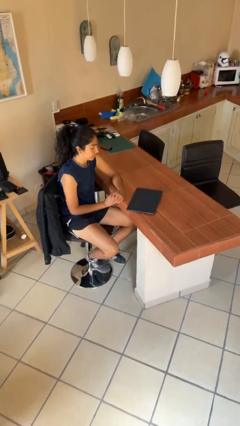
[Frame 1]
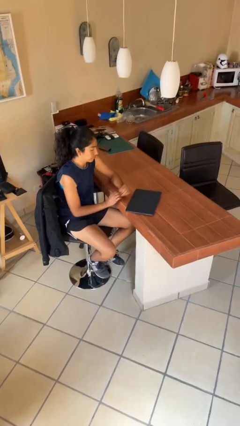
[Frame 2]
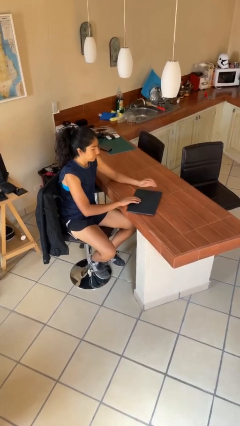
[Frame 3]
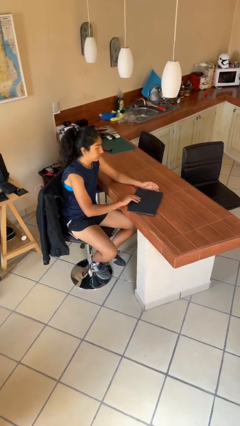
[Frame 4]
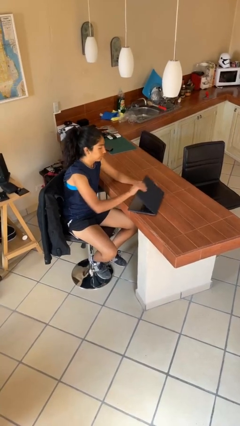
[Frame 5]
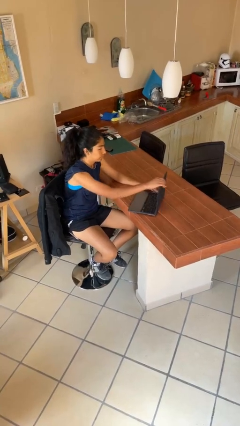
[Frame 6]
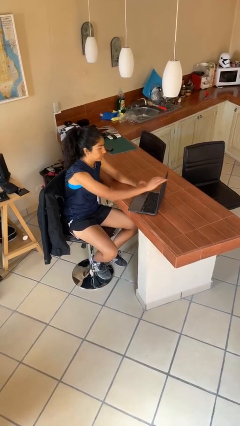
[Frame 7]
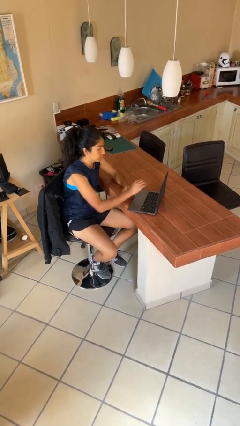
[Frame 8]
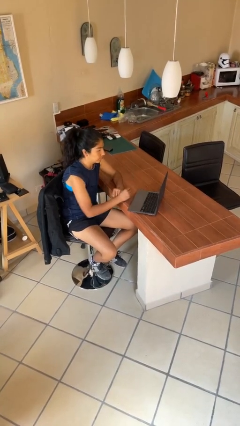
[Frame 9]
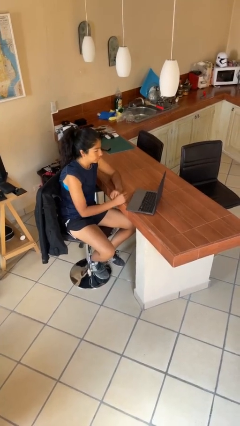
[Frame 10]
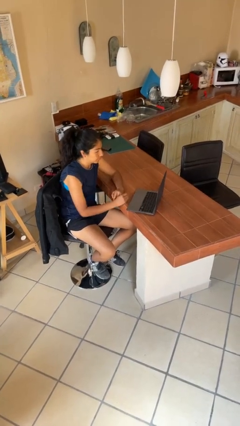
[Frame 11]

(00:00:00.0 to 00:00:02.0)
person opens laptop

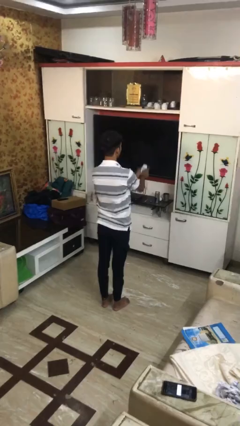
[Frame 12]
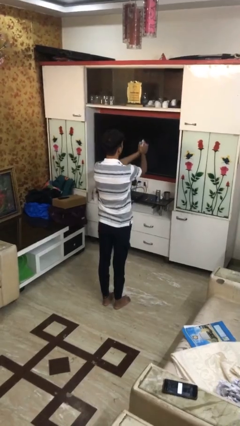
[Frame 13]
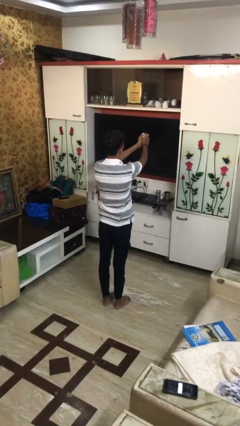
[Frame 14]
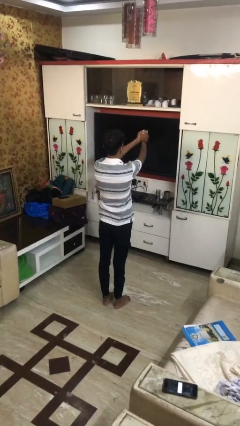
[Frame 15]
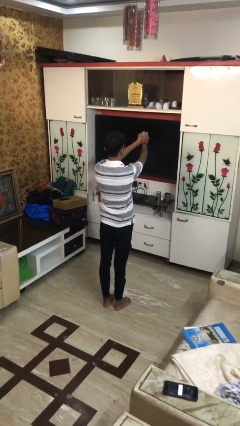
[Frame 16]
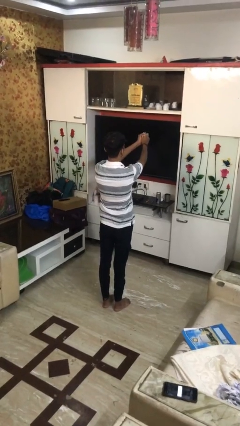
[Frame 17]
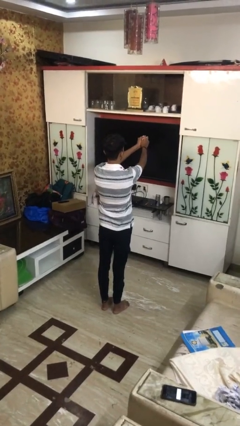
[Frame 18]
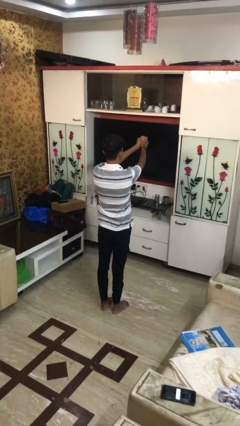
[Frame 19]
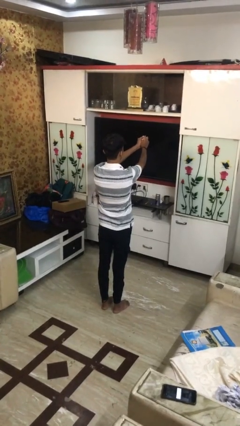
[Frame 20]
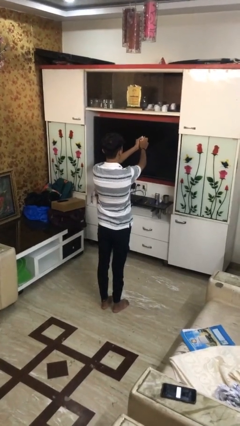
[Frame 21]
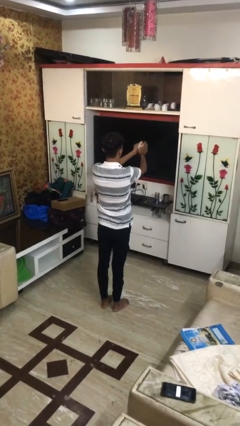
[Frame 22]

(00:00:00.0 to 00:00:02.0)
person crumples paper

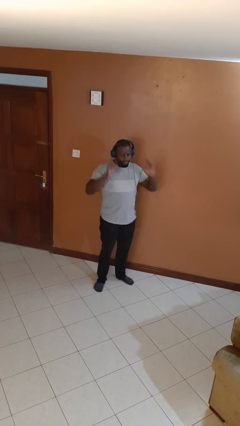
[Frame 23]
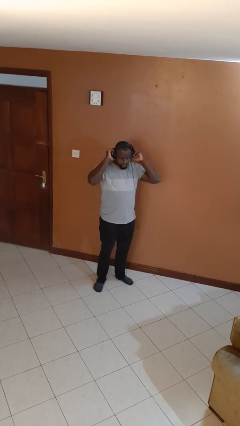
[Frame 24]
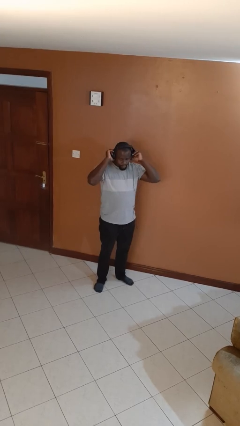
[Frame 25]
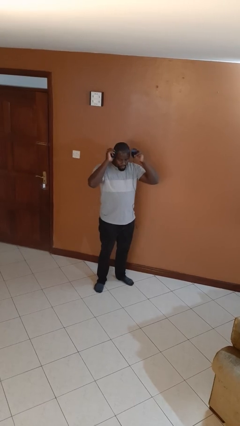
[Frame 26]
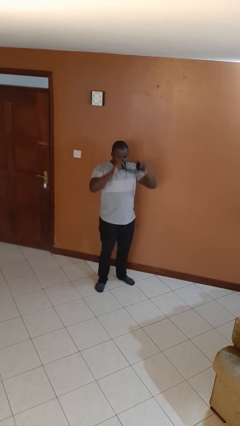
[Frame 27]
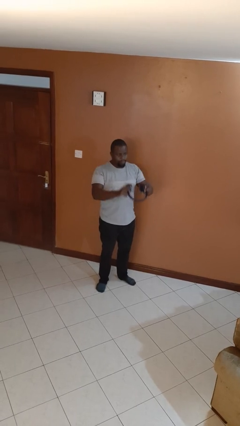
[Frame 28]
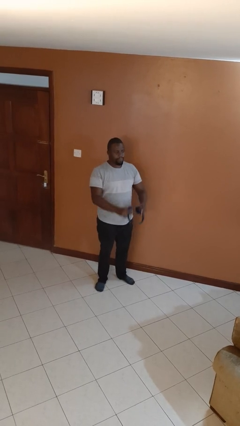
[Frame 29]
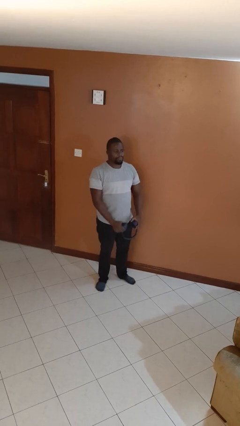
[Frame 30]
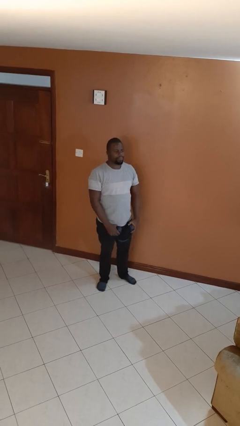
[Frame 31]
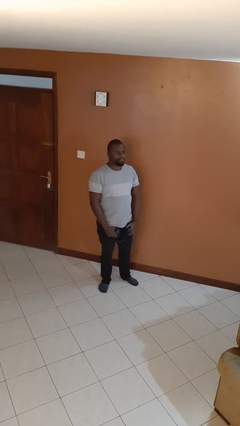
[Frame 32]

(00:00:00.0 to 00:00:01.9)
person takes off headphones

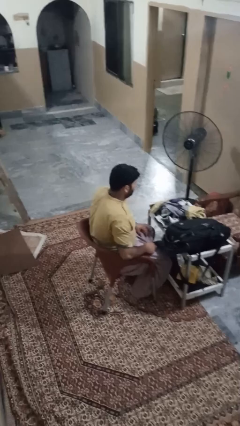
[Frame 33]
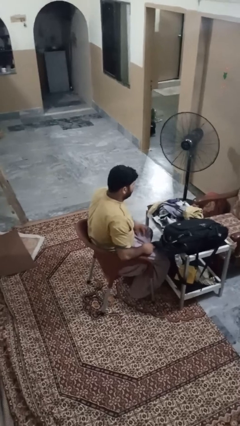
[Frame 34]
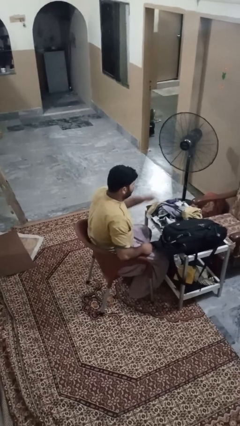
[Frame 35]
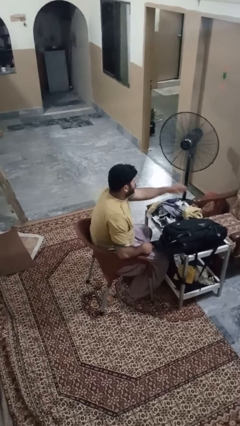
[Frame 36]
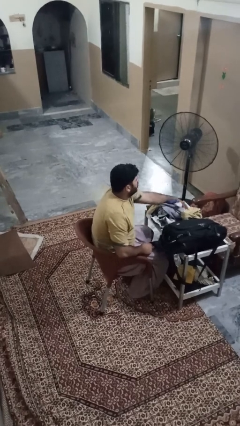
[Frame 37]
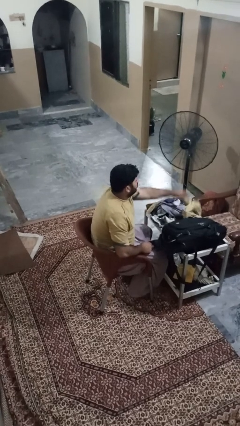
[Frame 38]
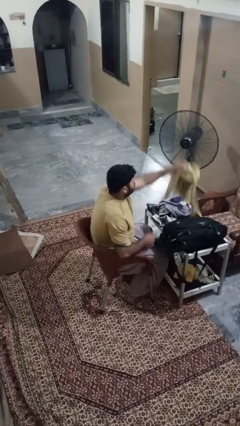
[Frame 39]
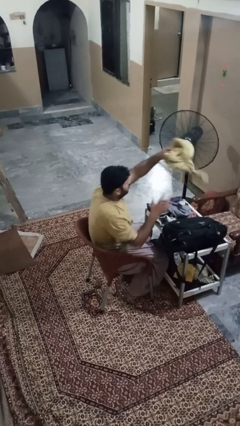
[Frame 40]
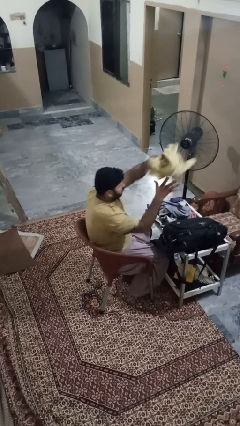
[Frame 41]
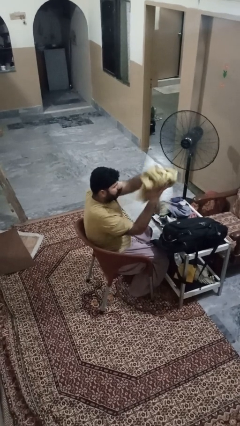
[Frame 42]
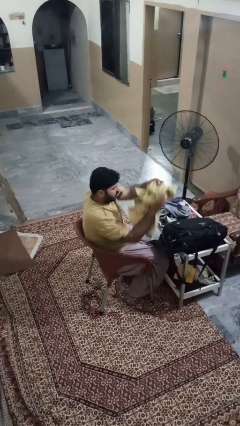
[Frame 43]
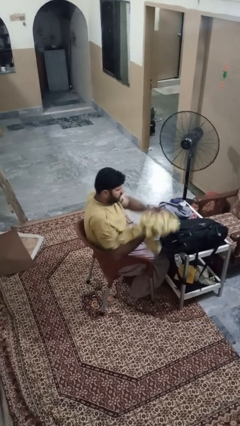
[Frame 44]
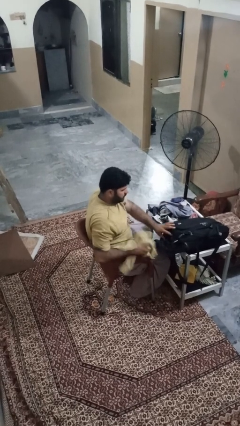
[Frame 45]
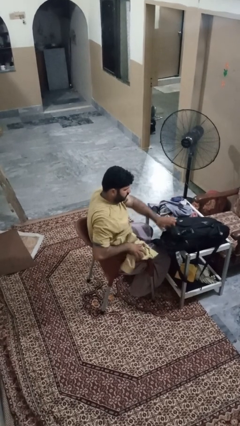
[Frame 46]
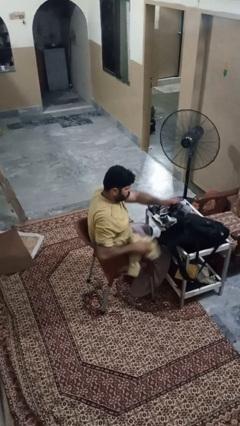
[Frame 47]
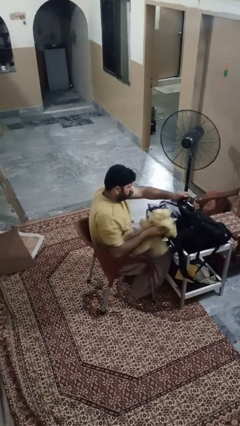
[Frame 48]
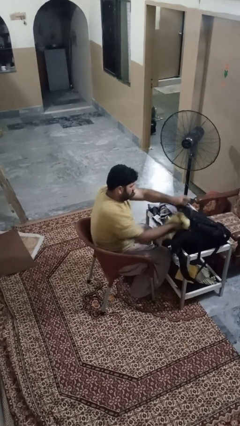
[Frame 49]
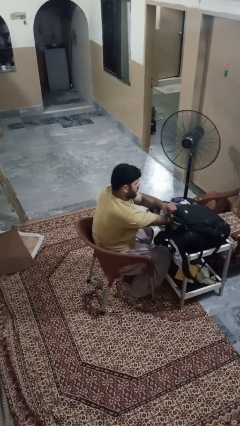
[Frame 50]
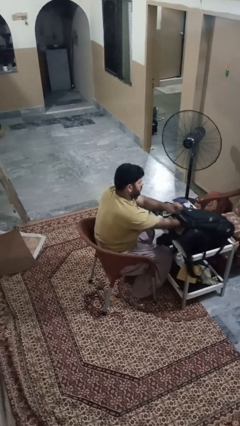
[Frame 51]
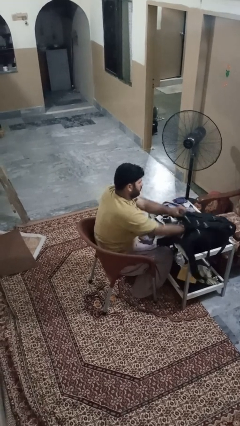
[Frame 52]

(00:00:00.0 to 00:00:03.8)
person loads clothes into suitcase

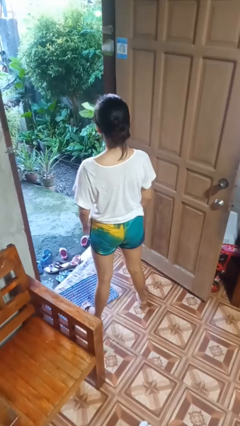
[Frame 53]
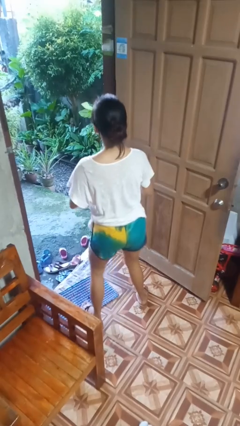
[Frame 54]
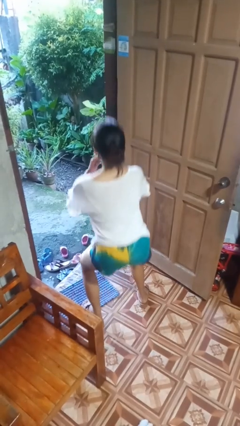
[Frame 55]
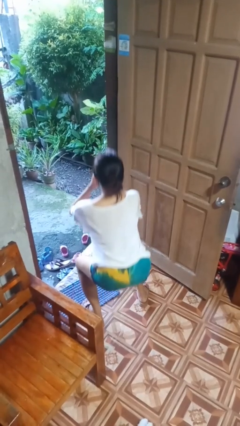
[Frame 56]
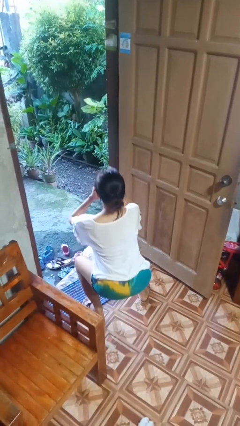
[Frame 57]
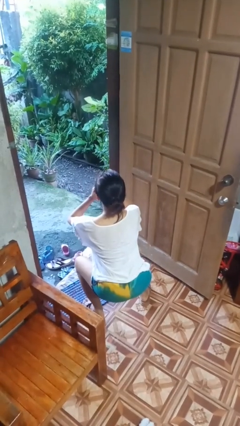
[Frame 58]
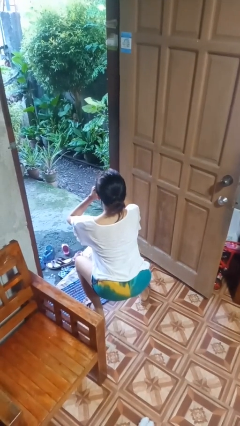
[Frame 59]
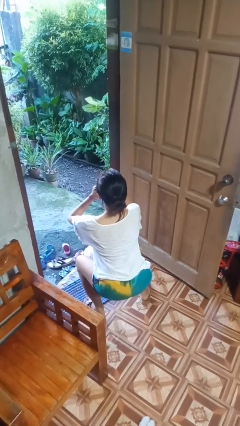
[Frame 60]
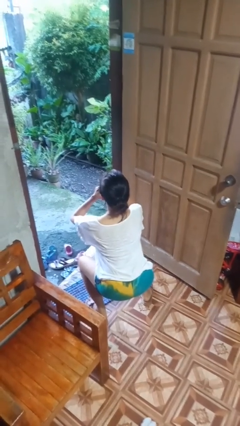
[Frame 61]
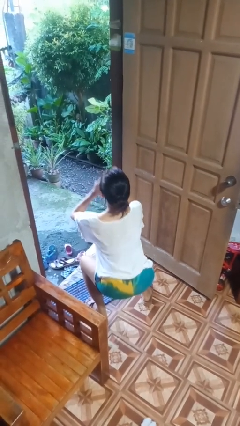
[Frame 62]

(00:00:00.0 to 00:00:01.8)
person squats

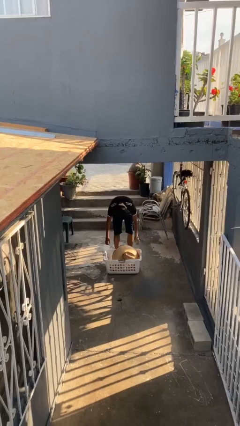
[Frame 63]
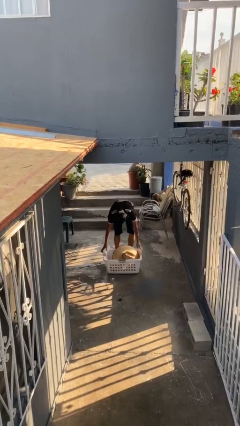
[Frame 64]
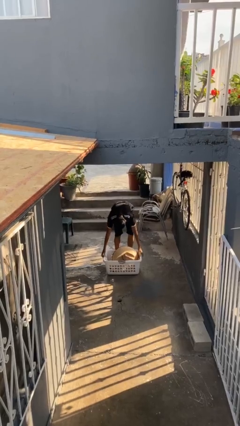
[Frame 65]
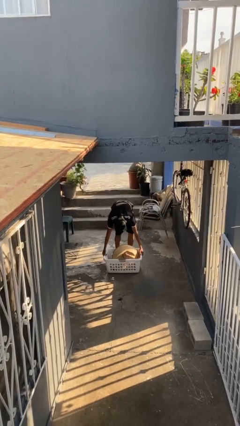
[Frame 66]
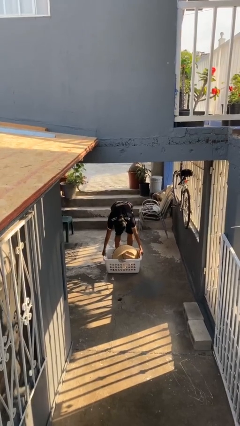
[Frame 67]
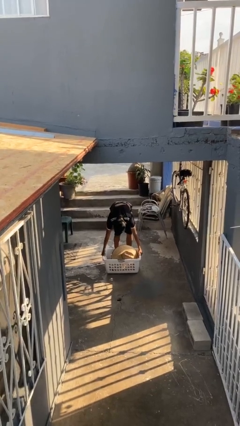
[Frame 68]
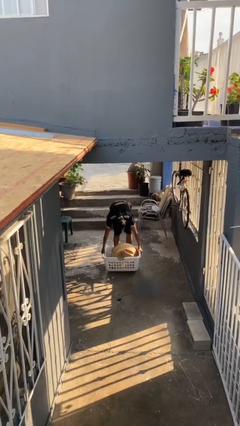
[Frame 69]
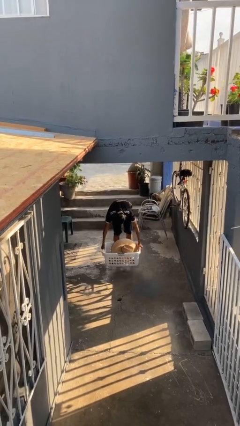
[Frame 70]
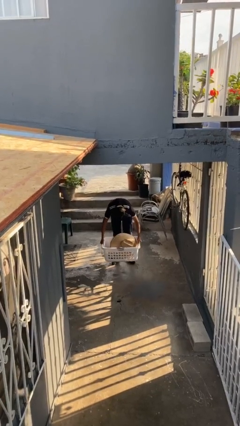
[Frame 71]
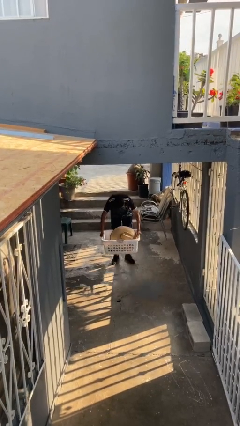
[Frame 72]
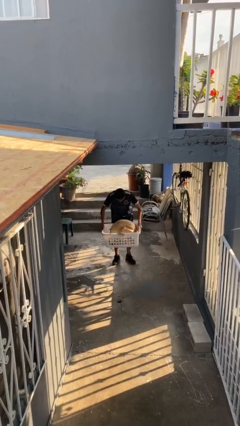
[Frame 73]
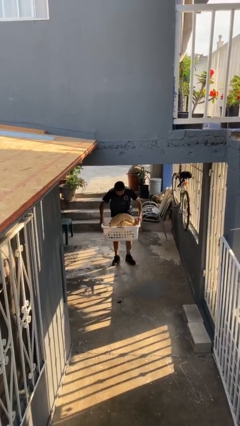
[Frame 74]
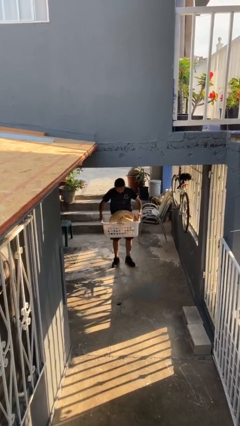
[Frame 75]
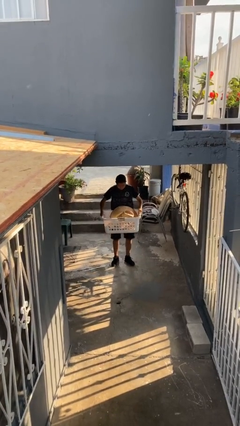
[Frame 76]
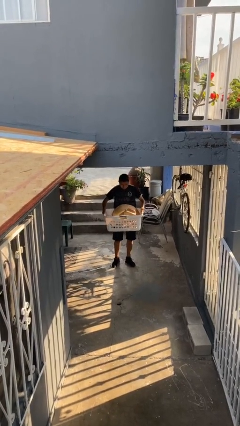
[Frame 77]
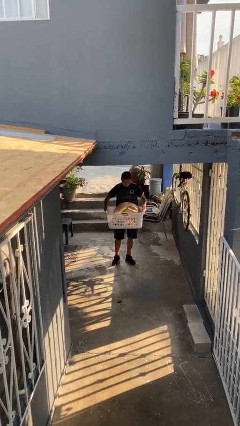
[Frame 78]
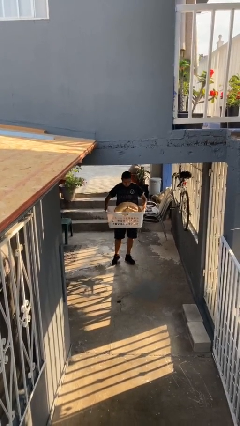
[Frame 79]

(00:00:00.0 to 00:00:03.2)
person picks up object from floor

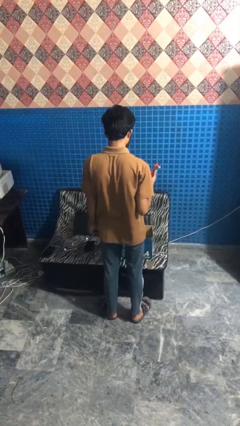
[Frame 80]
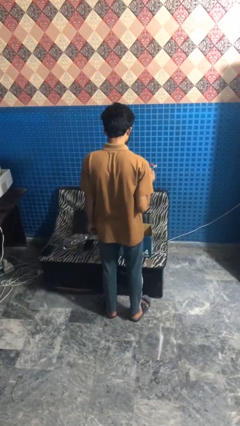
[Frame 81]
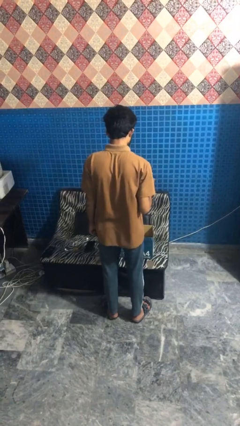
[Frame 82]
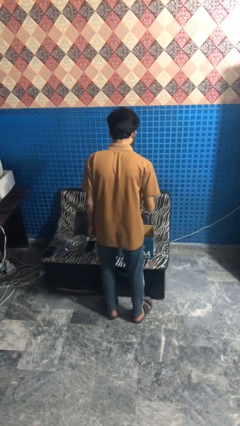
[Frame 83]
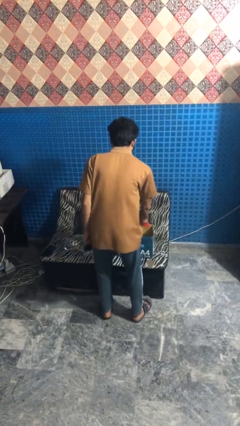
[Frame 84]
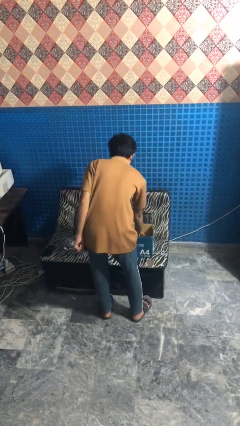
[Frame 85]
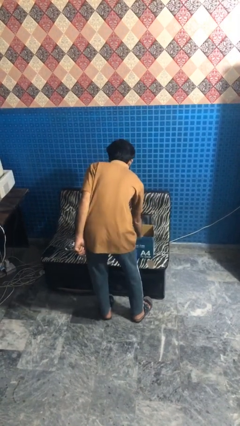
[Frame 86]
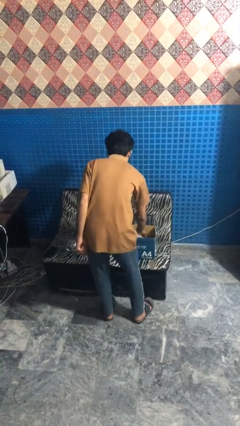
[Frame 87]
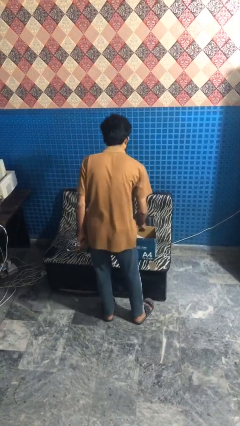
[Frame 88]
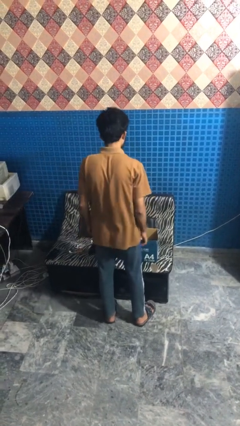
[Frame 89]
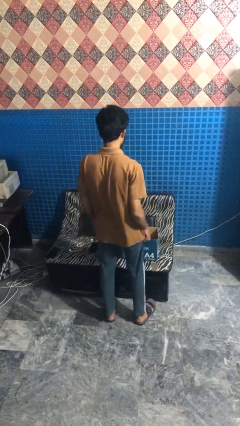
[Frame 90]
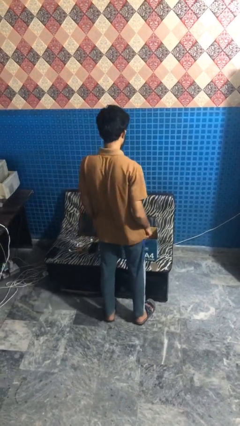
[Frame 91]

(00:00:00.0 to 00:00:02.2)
person puts object into box

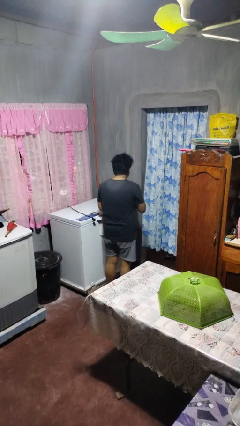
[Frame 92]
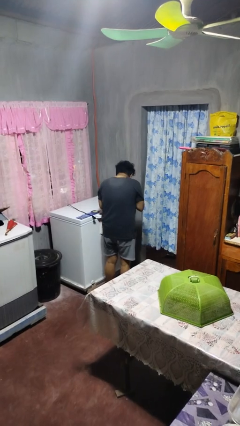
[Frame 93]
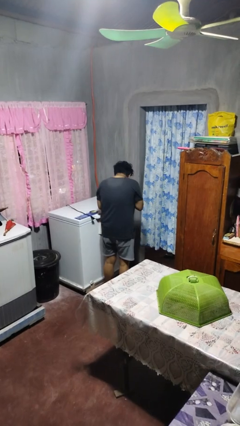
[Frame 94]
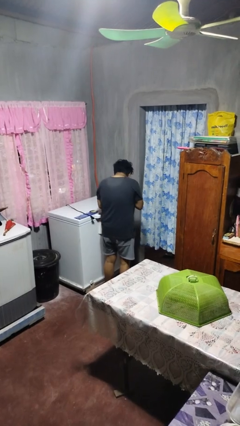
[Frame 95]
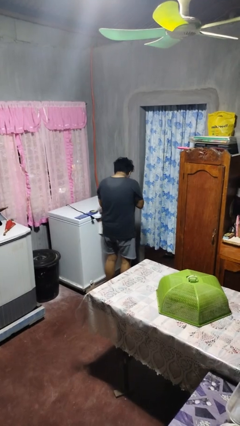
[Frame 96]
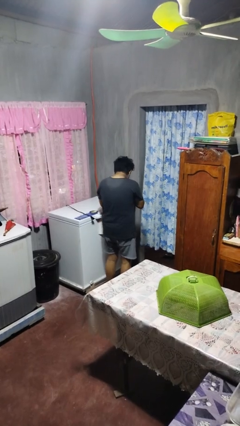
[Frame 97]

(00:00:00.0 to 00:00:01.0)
person sneezes into hand
